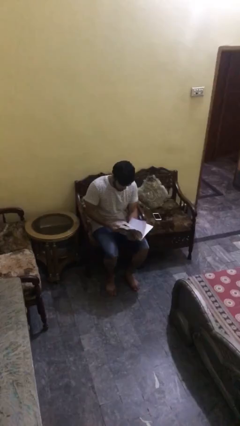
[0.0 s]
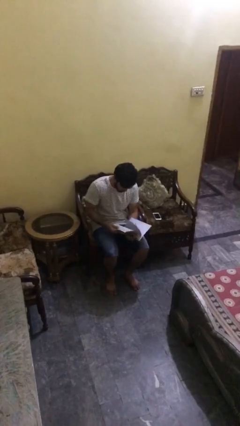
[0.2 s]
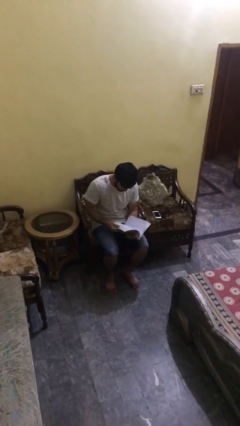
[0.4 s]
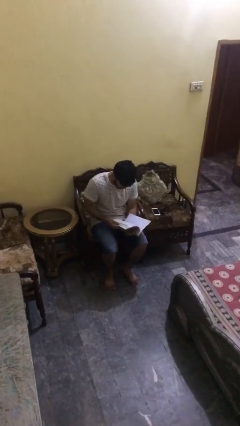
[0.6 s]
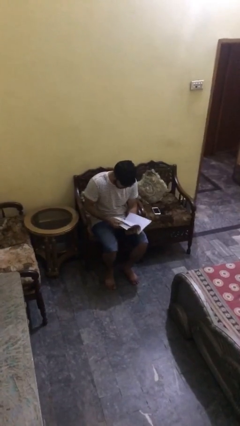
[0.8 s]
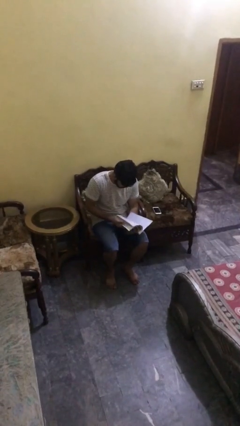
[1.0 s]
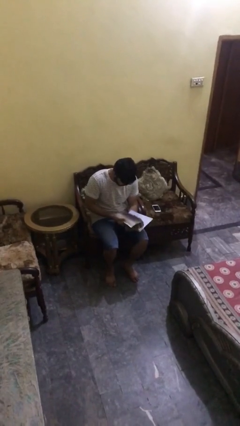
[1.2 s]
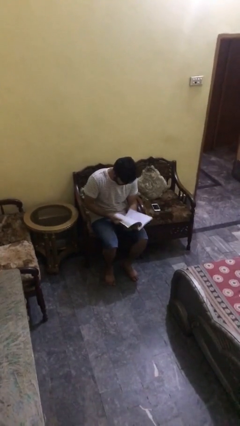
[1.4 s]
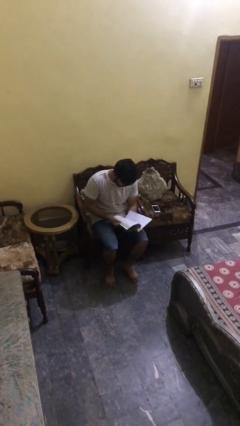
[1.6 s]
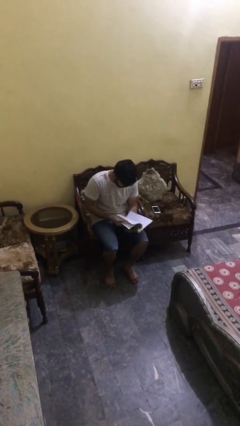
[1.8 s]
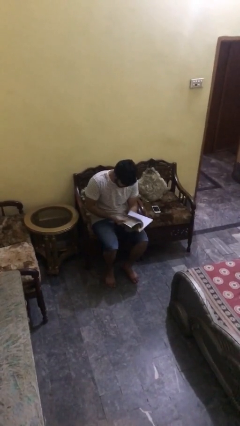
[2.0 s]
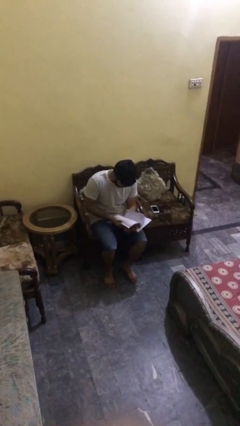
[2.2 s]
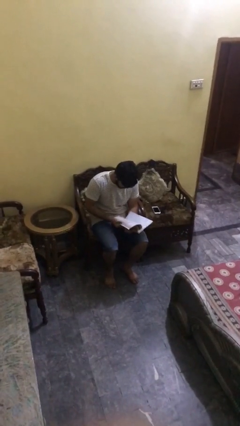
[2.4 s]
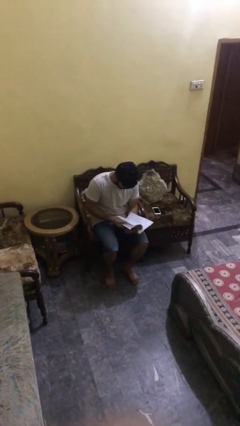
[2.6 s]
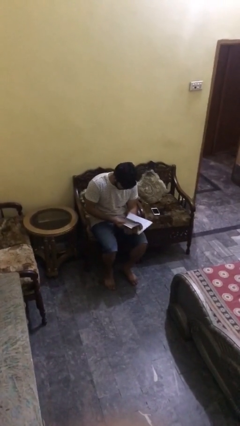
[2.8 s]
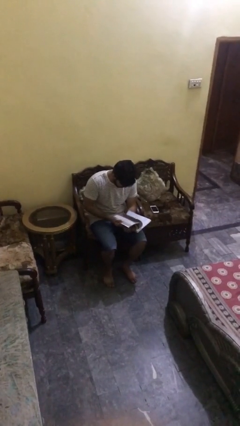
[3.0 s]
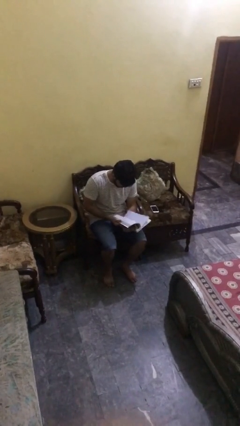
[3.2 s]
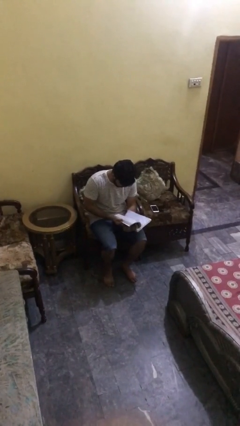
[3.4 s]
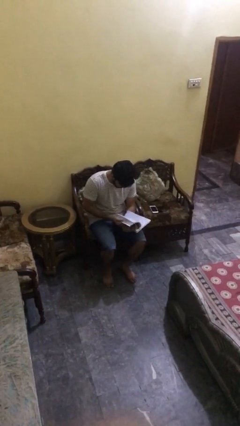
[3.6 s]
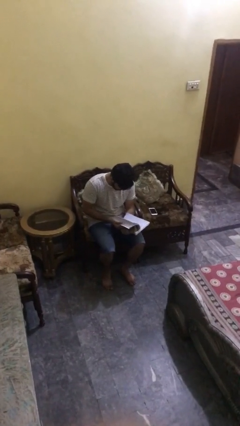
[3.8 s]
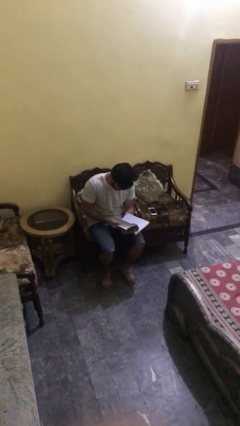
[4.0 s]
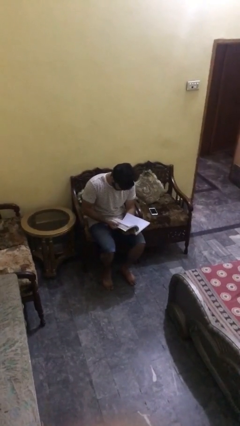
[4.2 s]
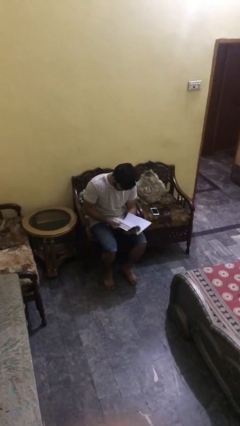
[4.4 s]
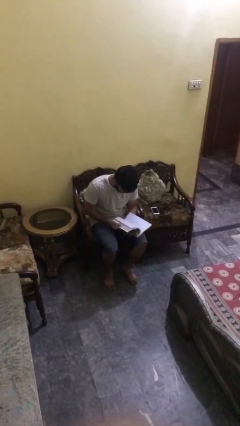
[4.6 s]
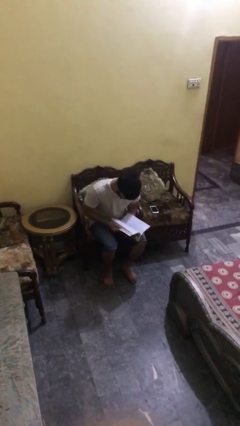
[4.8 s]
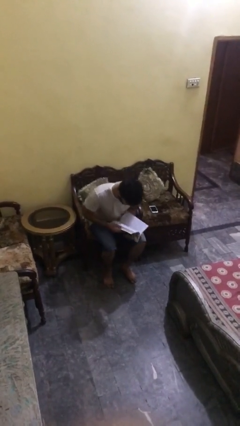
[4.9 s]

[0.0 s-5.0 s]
person reads document

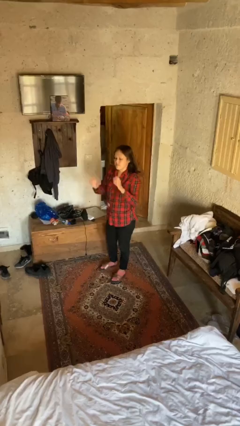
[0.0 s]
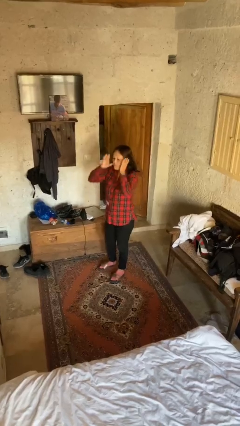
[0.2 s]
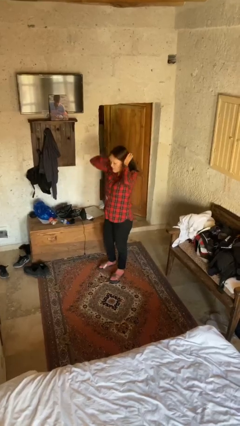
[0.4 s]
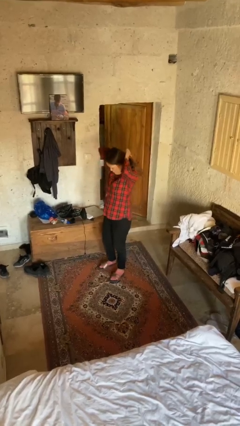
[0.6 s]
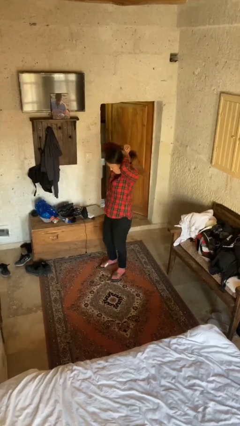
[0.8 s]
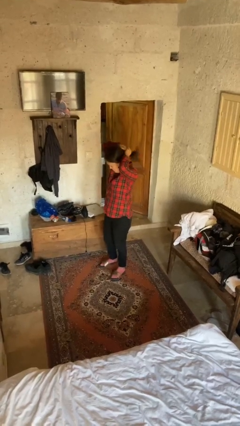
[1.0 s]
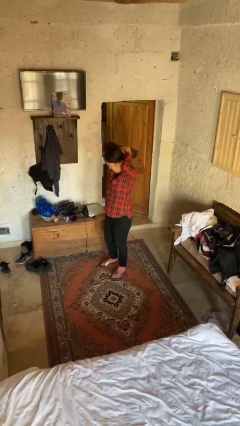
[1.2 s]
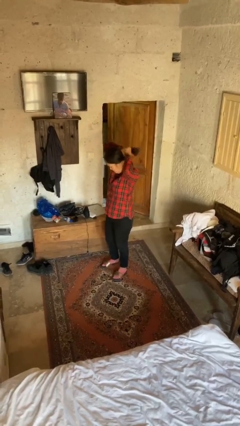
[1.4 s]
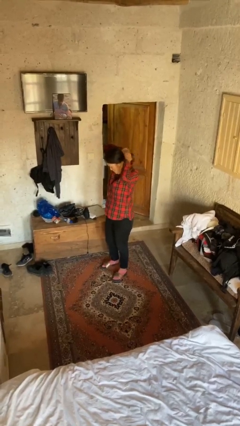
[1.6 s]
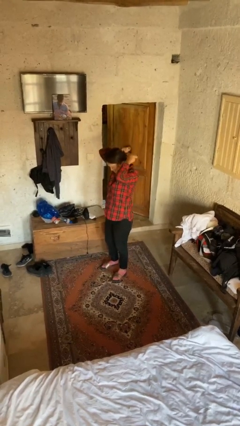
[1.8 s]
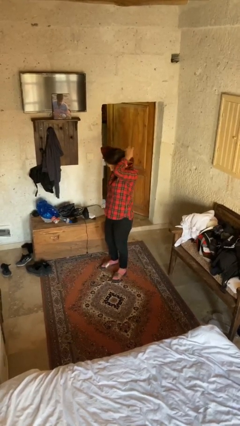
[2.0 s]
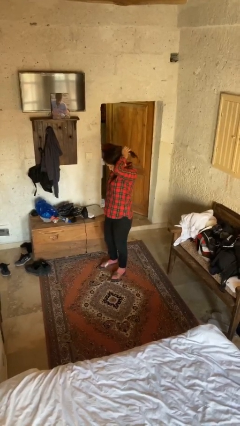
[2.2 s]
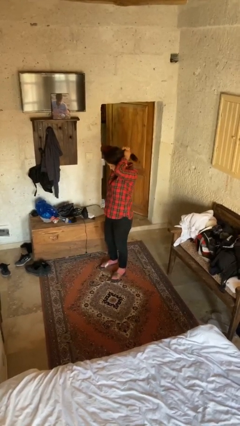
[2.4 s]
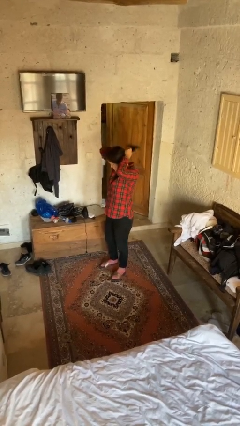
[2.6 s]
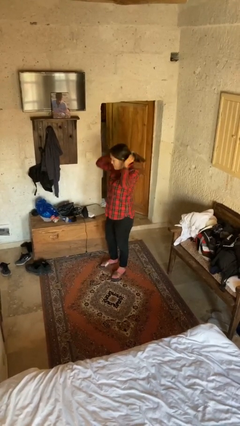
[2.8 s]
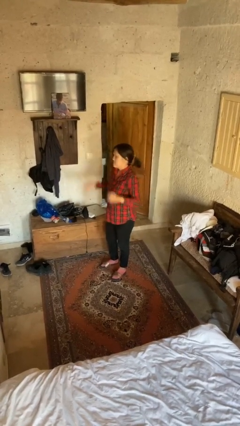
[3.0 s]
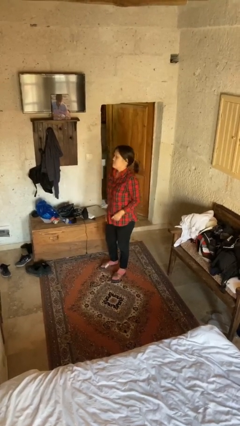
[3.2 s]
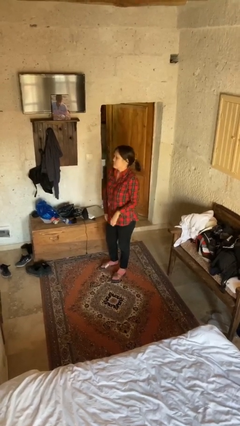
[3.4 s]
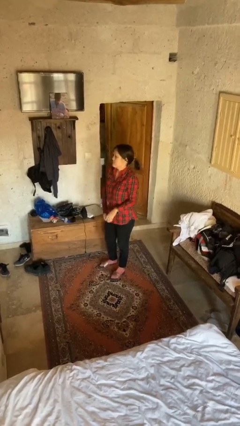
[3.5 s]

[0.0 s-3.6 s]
person puts hair in ponytail

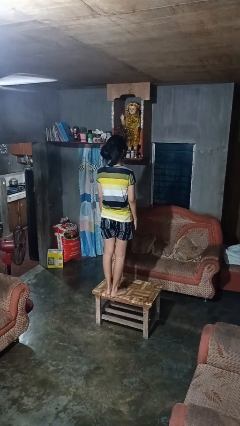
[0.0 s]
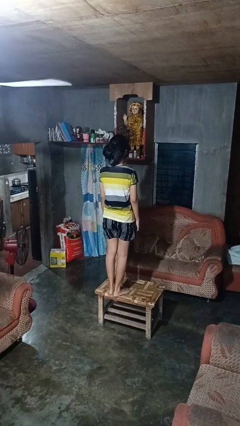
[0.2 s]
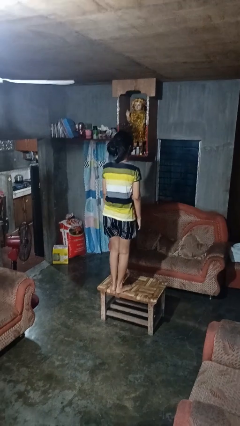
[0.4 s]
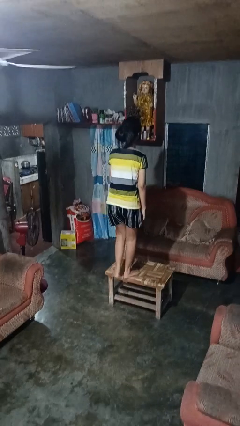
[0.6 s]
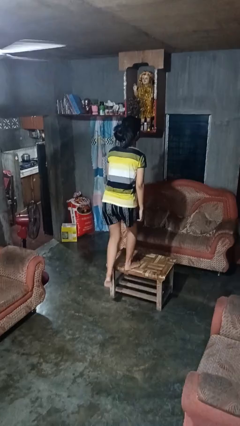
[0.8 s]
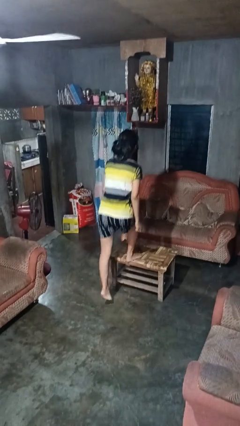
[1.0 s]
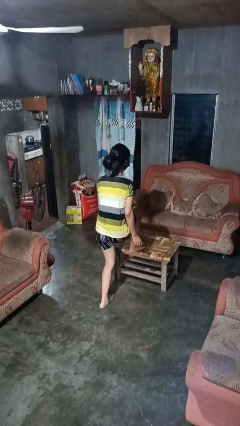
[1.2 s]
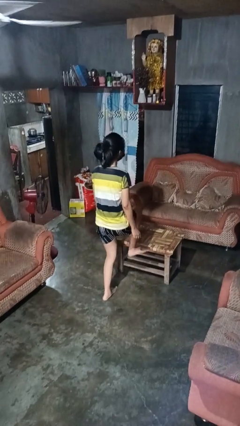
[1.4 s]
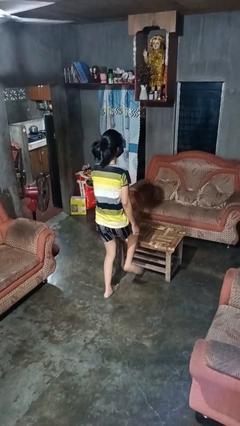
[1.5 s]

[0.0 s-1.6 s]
person climbs off table

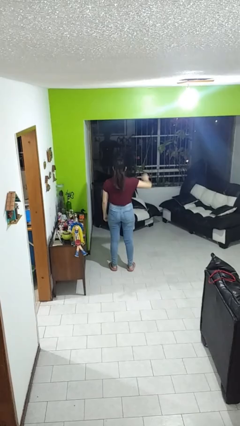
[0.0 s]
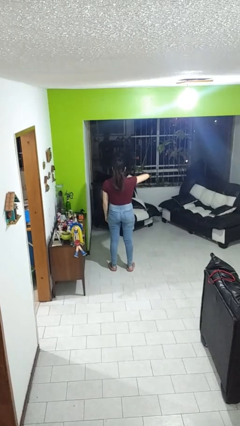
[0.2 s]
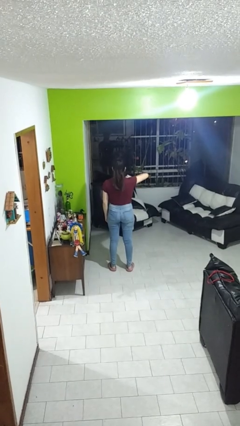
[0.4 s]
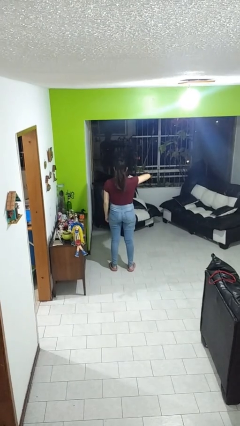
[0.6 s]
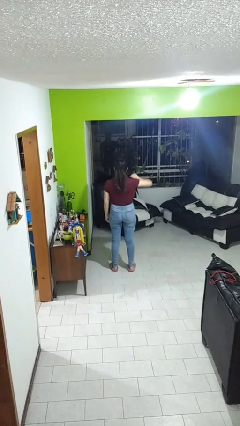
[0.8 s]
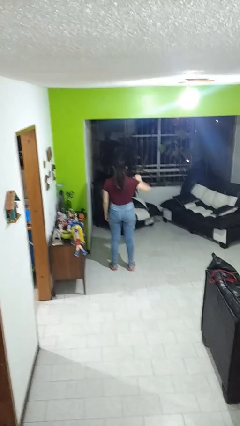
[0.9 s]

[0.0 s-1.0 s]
person gestures thumbs down

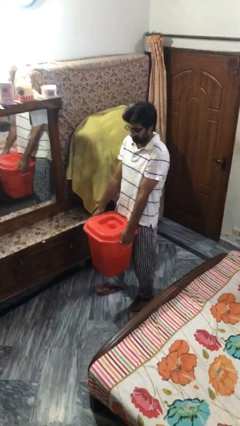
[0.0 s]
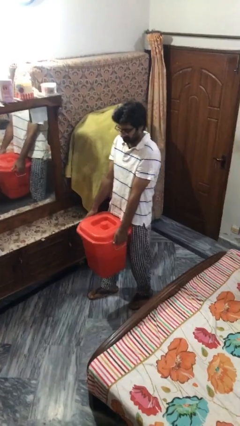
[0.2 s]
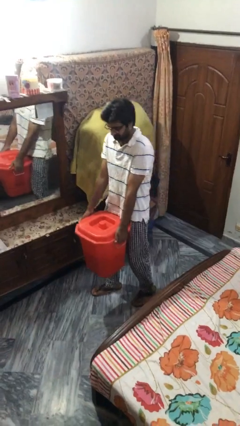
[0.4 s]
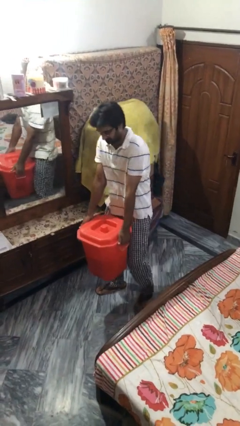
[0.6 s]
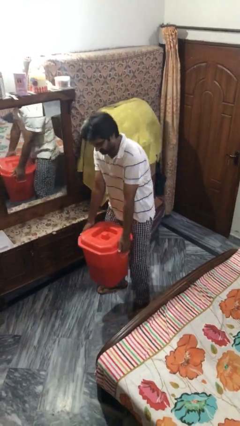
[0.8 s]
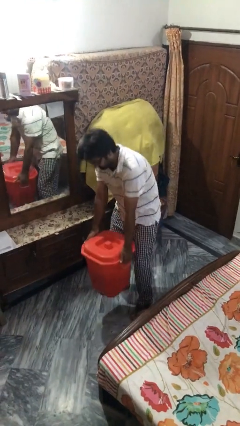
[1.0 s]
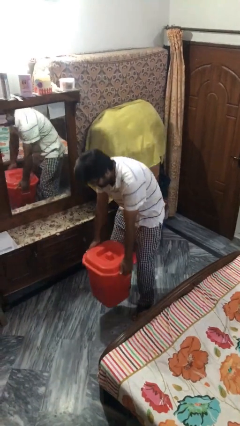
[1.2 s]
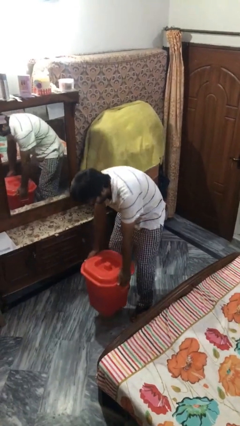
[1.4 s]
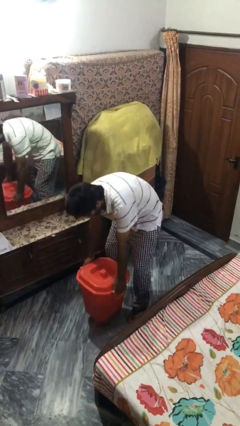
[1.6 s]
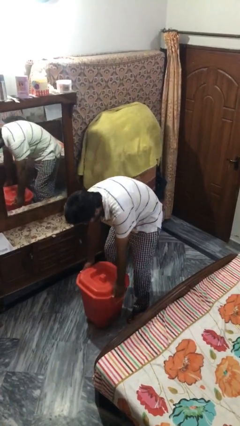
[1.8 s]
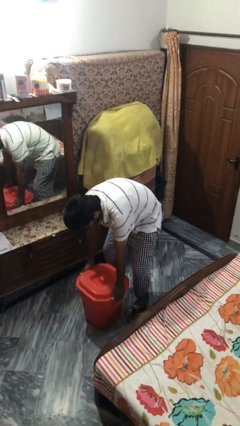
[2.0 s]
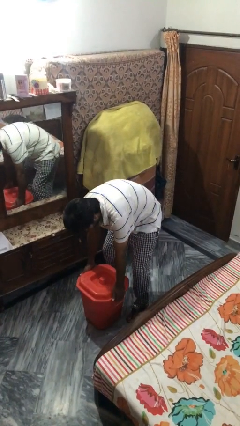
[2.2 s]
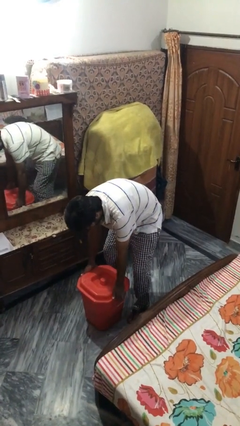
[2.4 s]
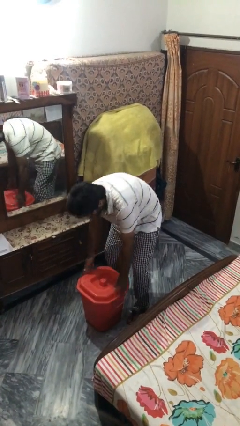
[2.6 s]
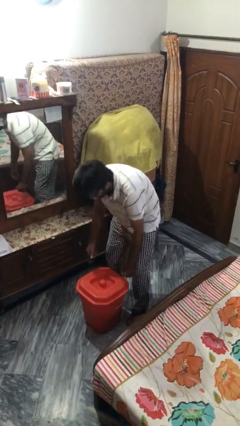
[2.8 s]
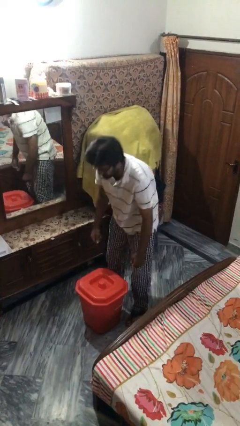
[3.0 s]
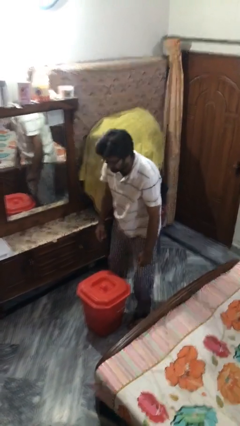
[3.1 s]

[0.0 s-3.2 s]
person puts down object on floor

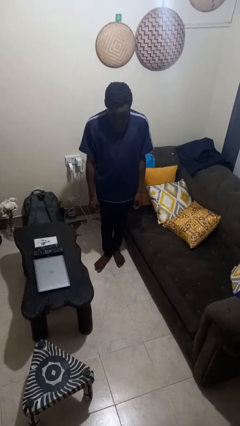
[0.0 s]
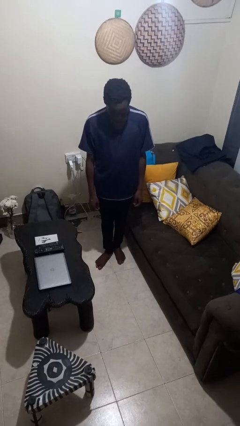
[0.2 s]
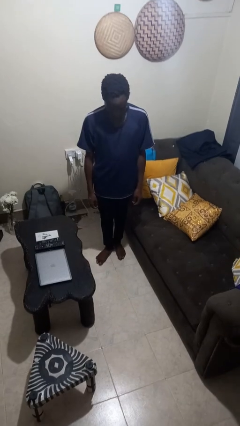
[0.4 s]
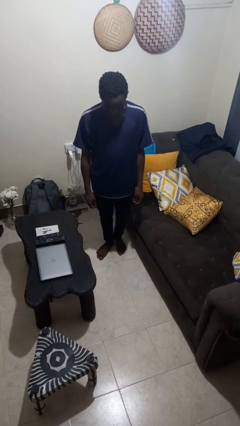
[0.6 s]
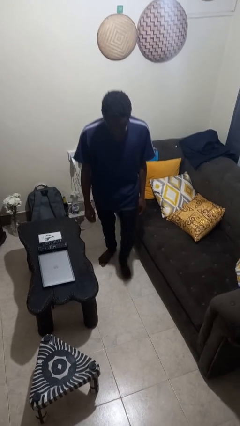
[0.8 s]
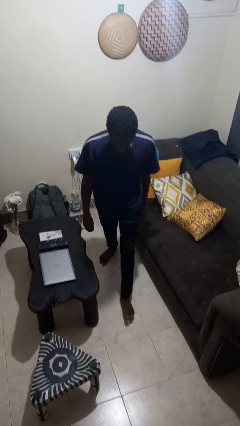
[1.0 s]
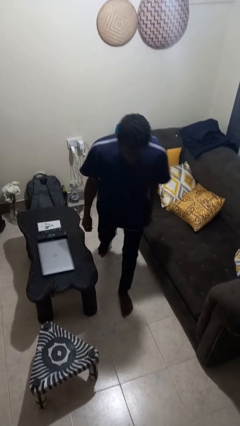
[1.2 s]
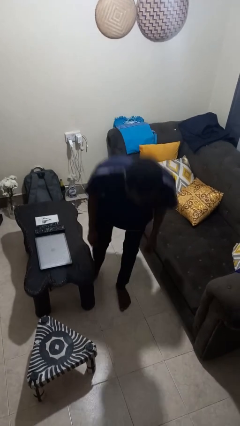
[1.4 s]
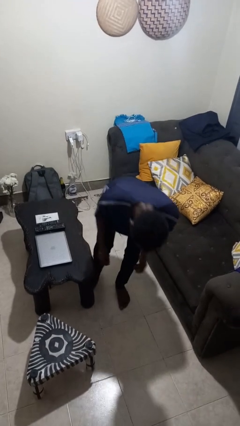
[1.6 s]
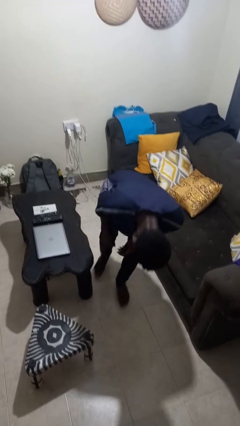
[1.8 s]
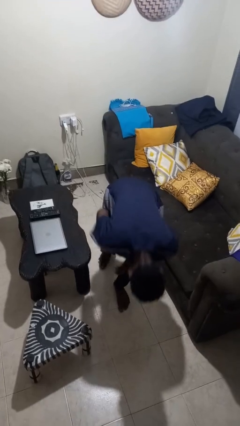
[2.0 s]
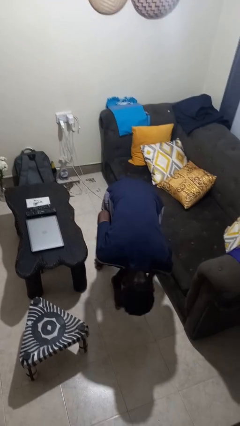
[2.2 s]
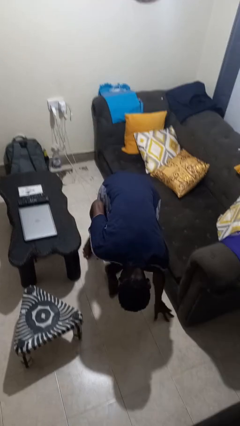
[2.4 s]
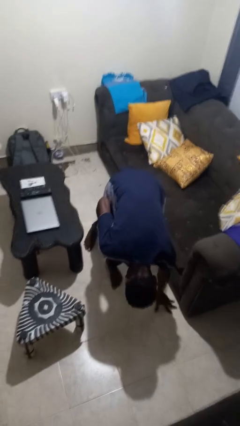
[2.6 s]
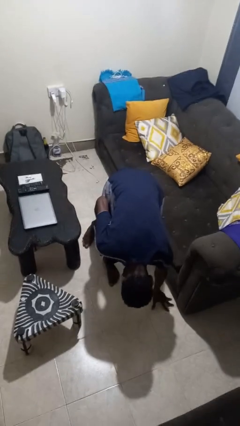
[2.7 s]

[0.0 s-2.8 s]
person trips on object on floor
